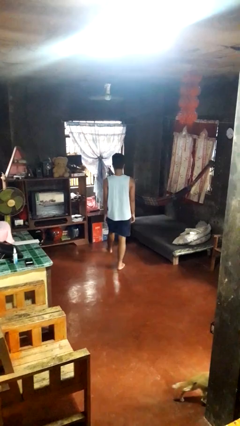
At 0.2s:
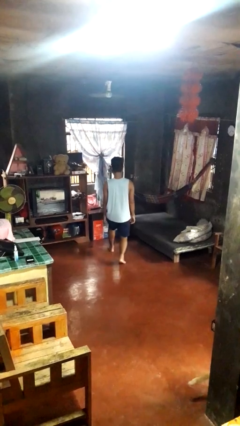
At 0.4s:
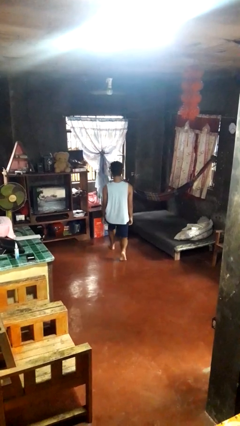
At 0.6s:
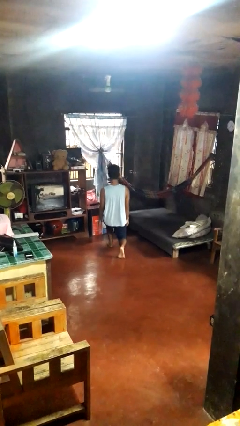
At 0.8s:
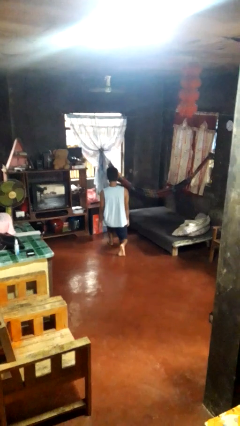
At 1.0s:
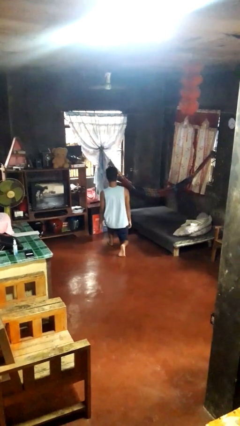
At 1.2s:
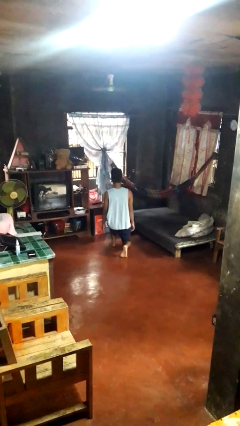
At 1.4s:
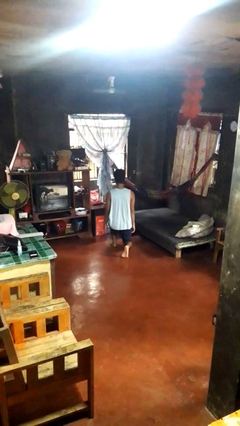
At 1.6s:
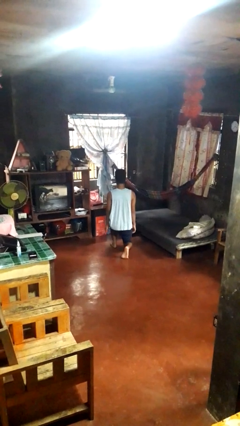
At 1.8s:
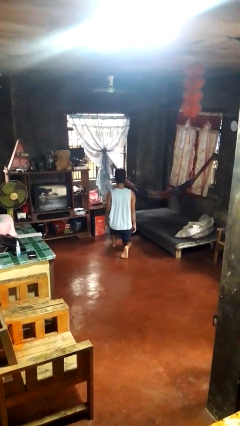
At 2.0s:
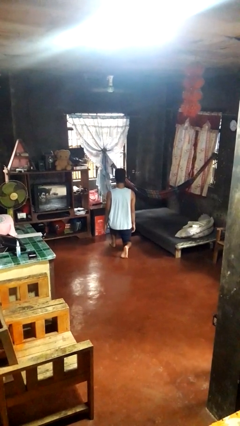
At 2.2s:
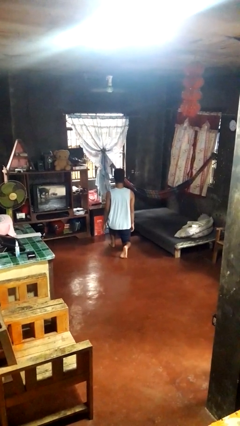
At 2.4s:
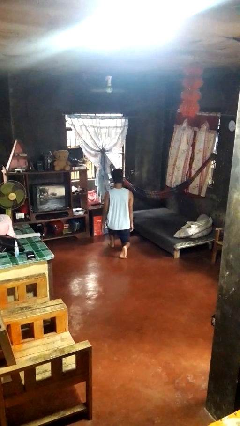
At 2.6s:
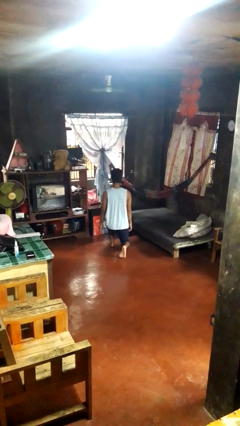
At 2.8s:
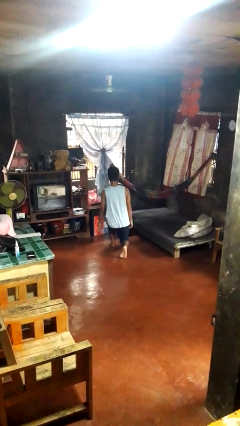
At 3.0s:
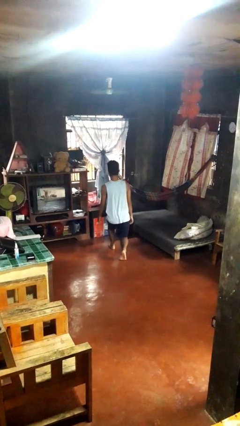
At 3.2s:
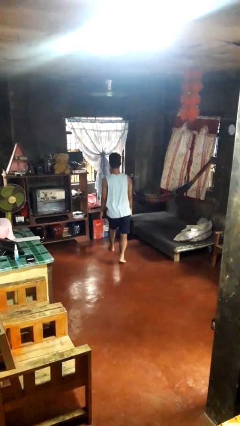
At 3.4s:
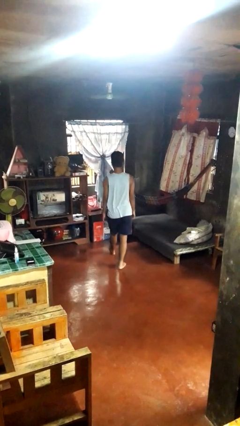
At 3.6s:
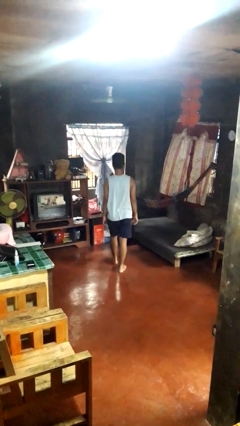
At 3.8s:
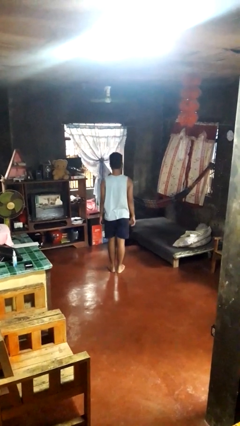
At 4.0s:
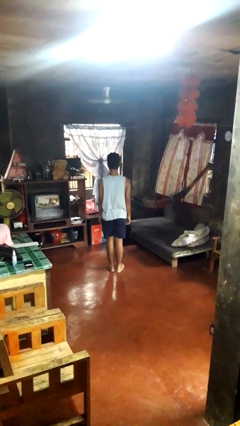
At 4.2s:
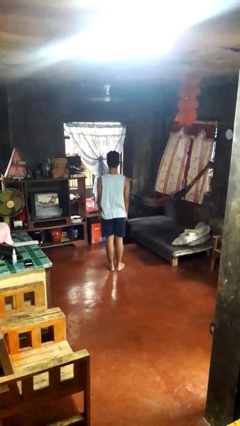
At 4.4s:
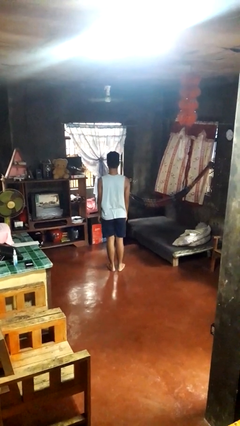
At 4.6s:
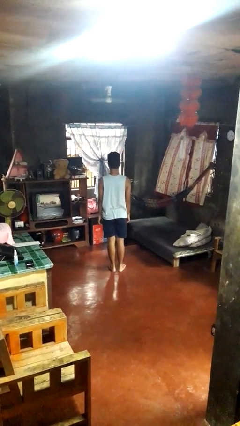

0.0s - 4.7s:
person exercises with lunges

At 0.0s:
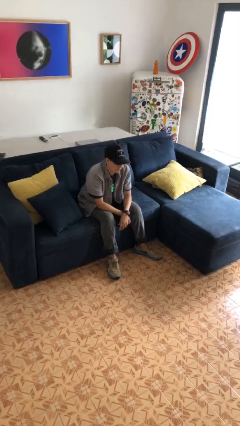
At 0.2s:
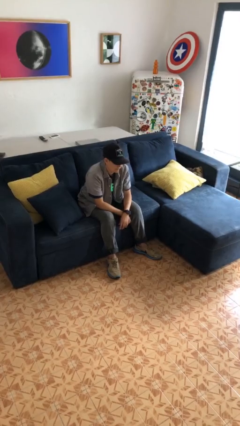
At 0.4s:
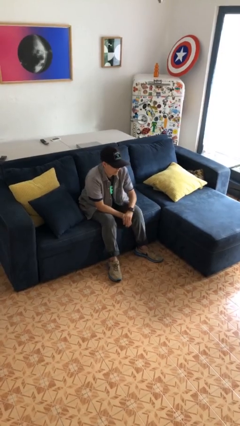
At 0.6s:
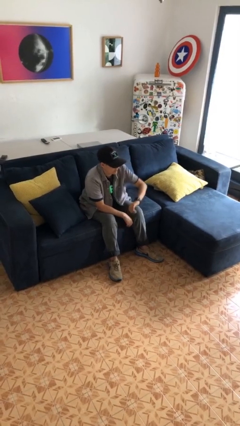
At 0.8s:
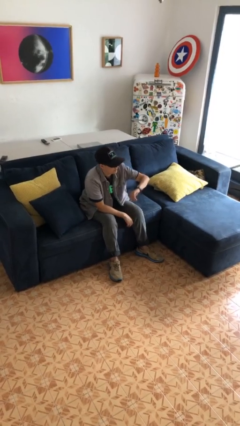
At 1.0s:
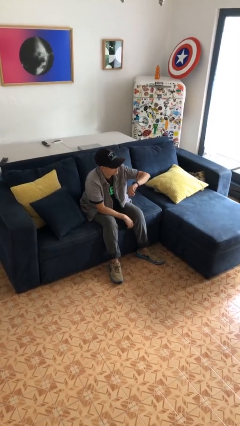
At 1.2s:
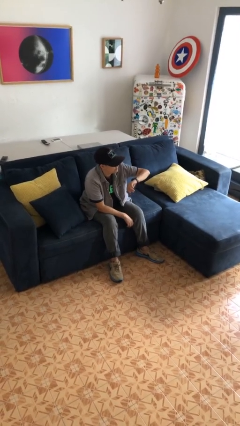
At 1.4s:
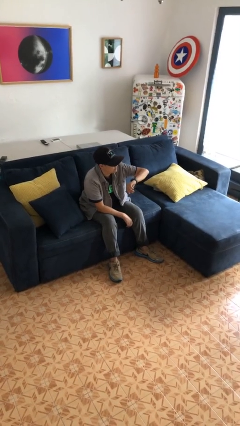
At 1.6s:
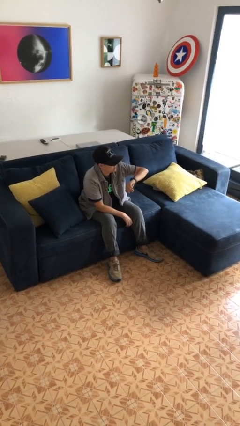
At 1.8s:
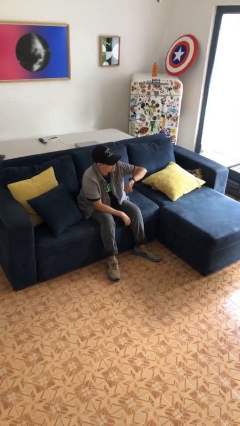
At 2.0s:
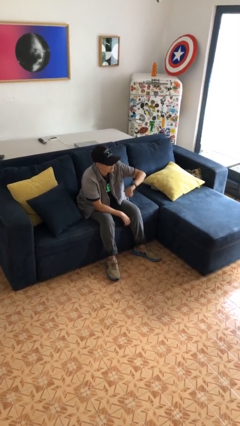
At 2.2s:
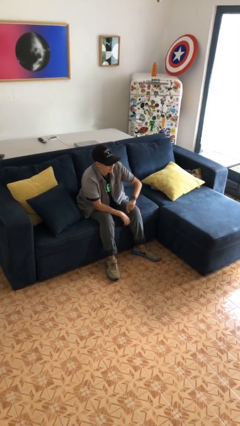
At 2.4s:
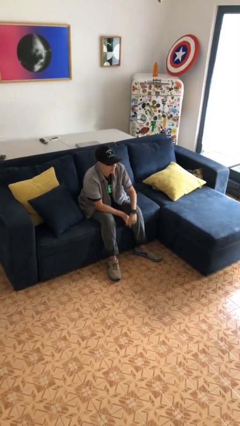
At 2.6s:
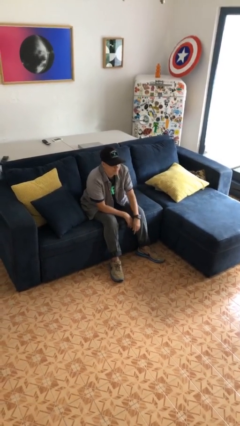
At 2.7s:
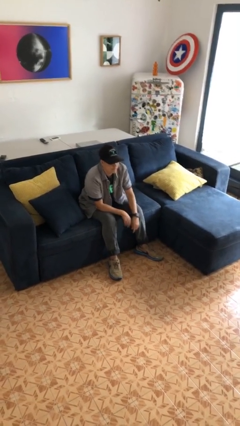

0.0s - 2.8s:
person looks at wristwatch

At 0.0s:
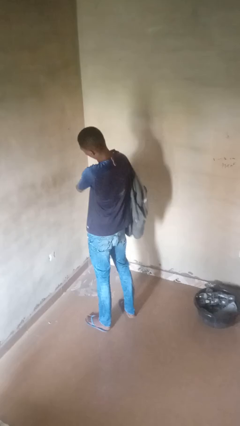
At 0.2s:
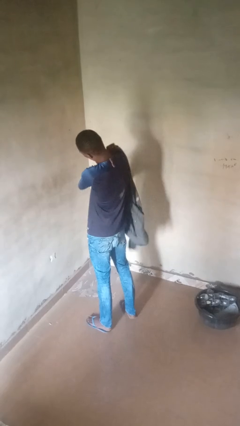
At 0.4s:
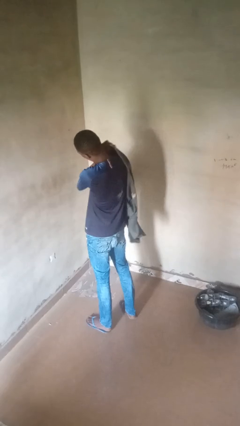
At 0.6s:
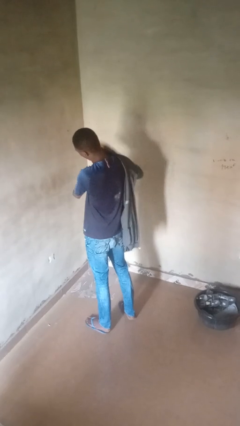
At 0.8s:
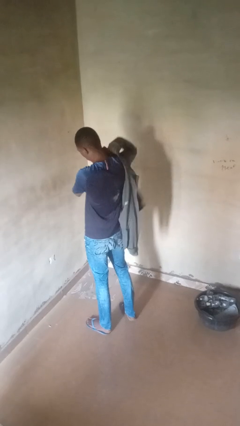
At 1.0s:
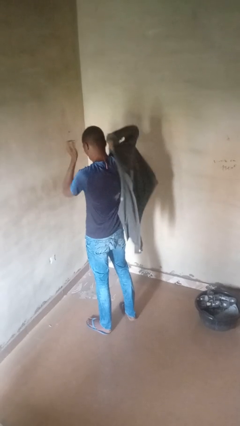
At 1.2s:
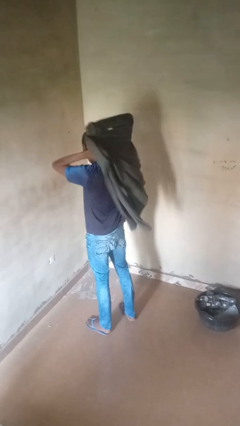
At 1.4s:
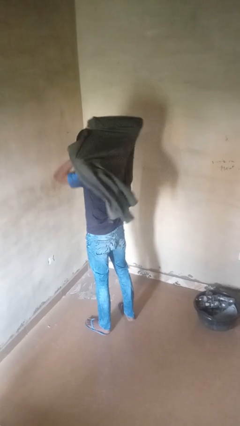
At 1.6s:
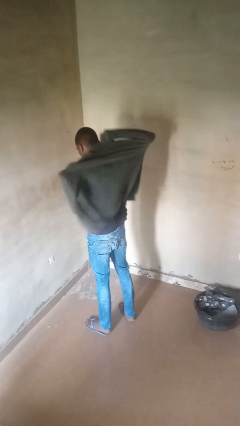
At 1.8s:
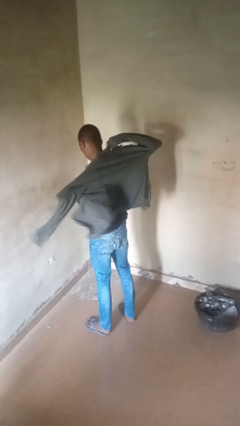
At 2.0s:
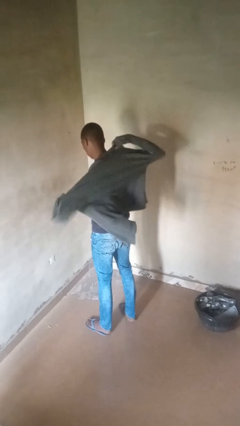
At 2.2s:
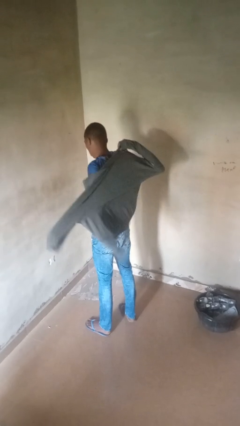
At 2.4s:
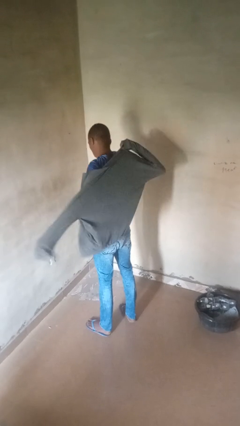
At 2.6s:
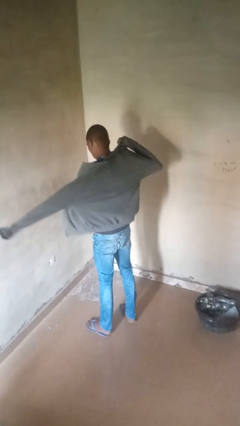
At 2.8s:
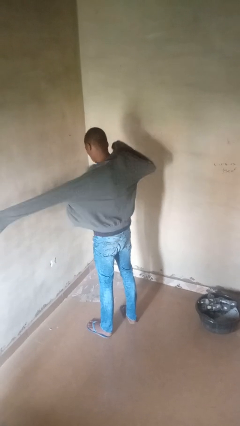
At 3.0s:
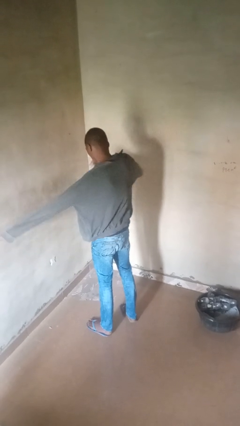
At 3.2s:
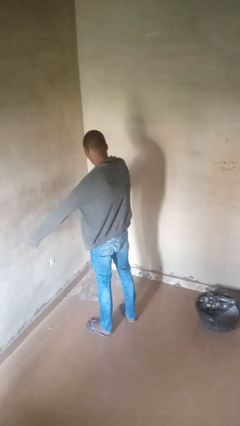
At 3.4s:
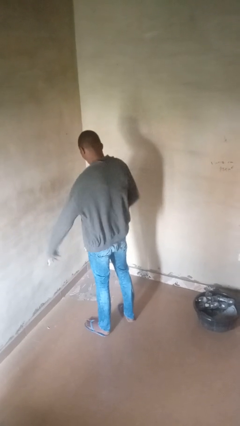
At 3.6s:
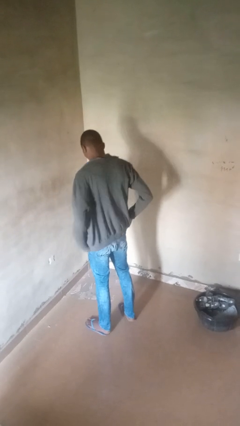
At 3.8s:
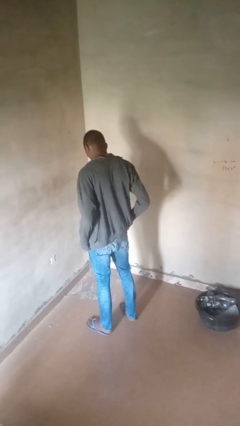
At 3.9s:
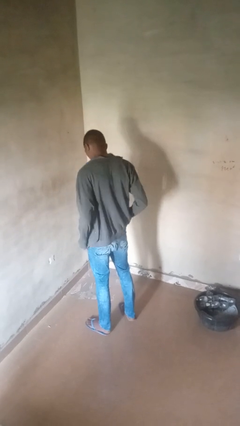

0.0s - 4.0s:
person puts on jacket

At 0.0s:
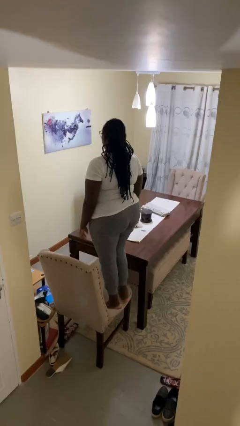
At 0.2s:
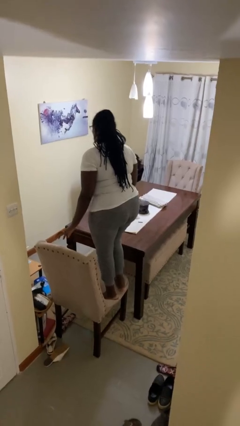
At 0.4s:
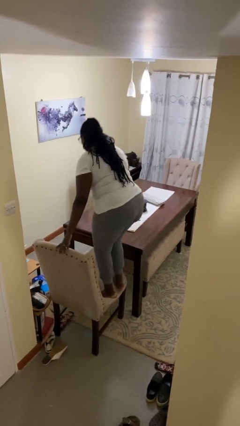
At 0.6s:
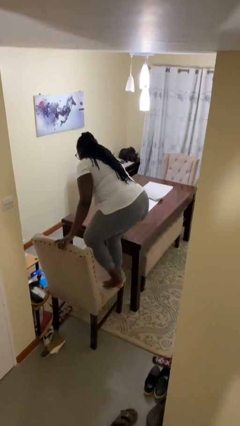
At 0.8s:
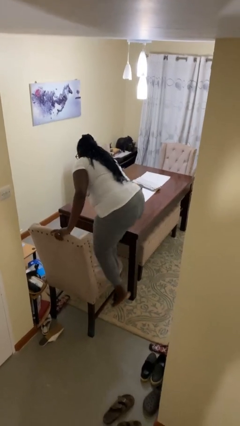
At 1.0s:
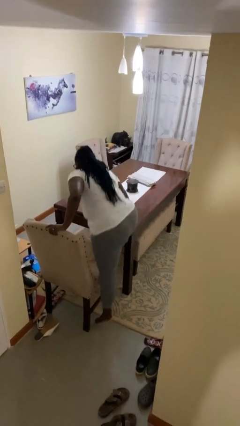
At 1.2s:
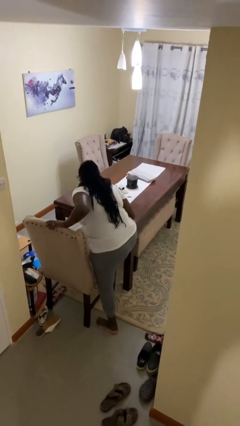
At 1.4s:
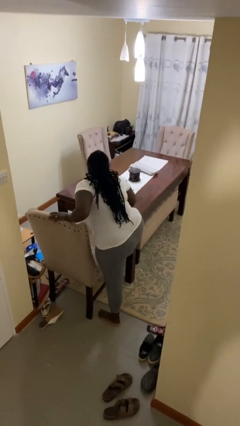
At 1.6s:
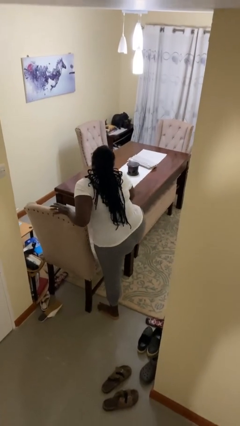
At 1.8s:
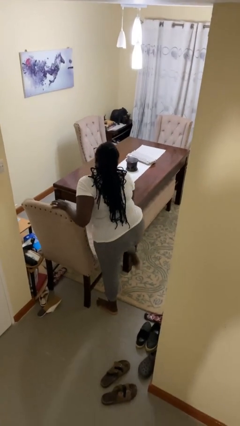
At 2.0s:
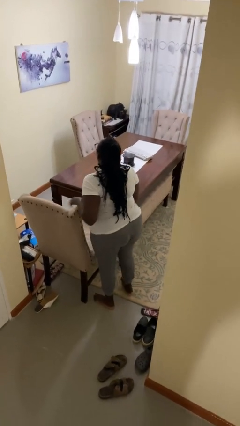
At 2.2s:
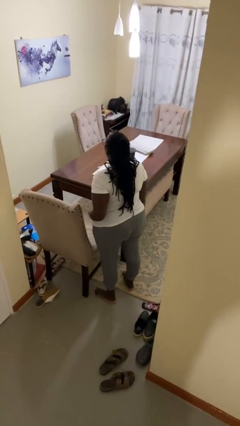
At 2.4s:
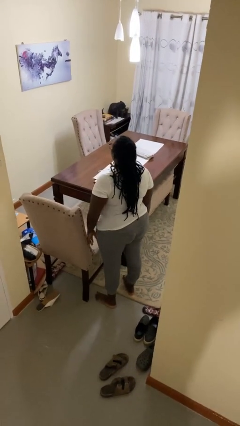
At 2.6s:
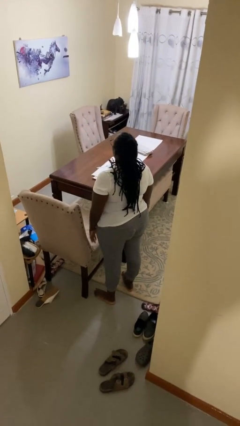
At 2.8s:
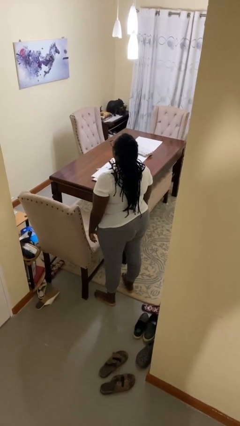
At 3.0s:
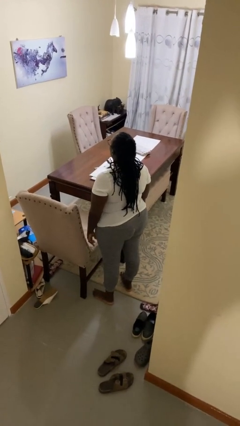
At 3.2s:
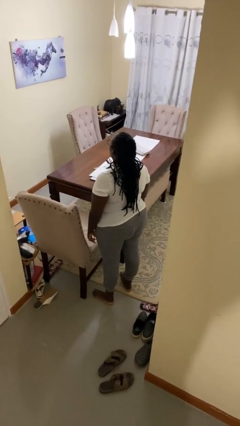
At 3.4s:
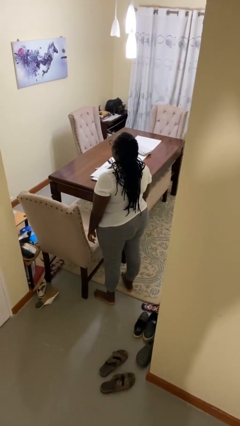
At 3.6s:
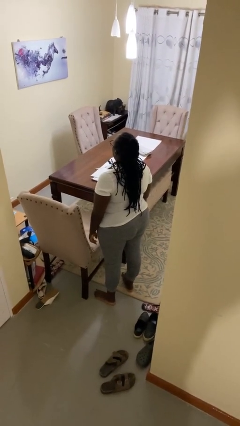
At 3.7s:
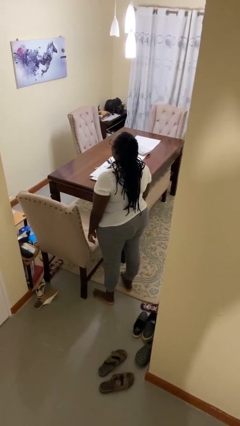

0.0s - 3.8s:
person climbs off chair

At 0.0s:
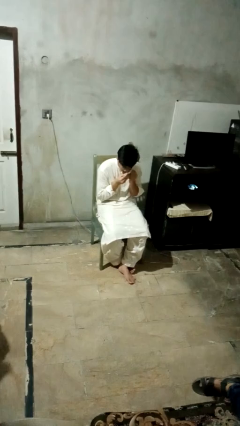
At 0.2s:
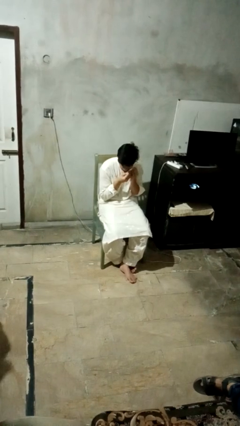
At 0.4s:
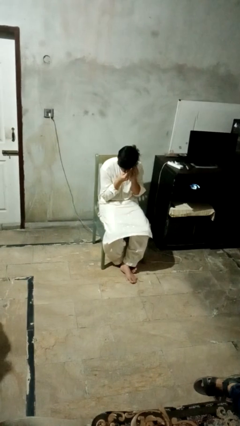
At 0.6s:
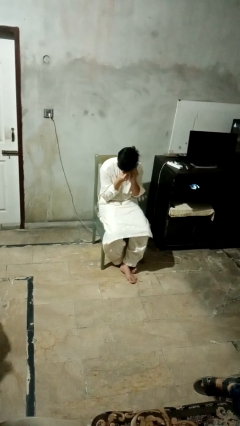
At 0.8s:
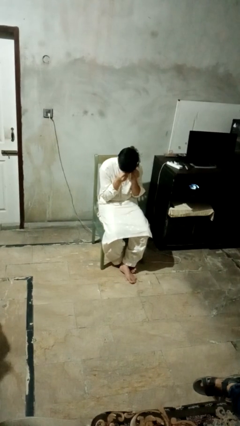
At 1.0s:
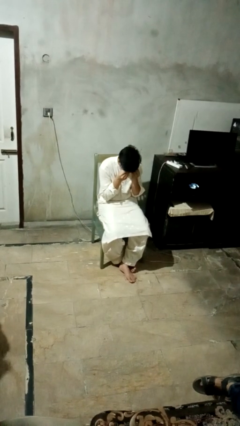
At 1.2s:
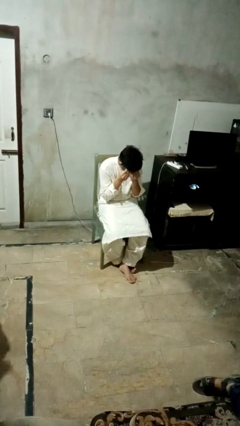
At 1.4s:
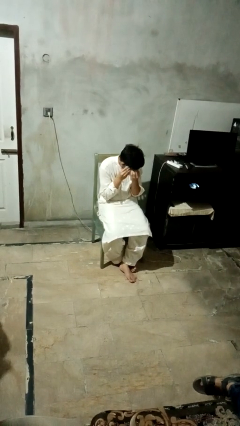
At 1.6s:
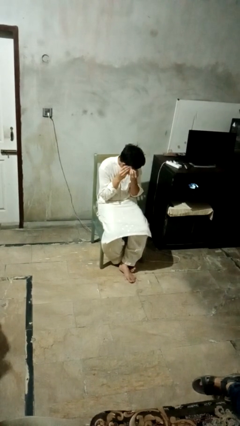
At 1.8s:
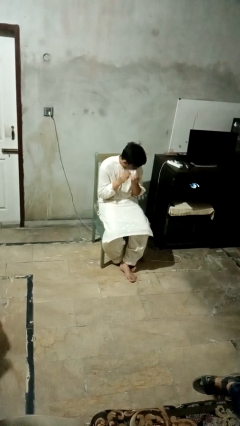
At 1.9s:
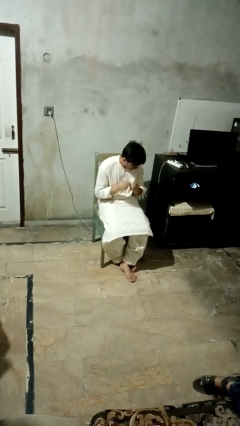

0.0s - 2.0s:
person wipes mouth with napkin

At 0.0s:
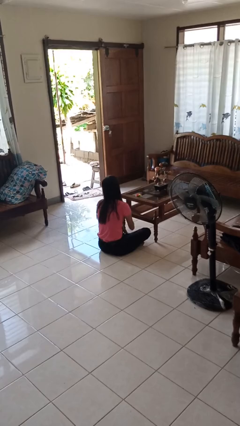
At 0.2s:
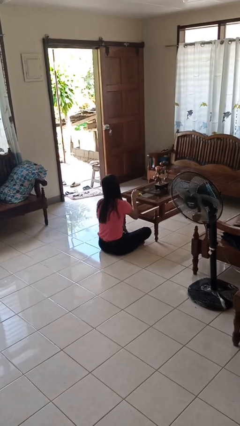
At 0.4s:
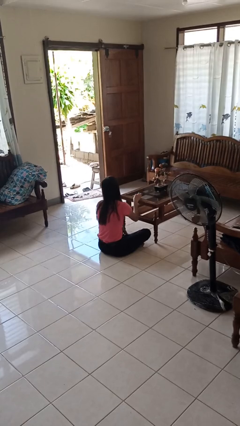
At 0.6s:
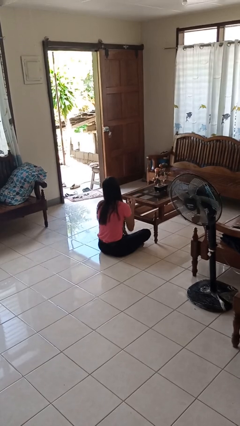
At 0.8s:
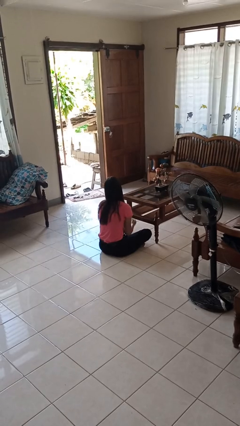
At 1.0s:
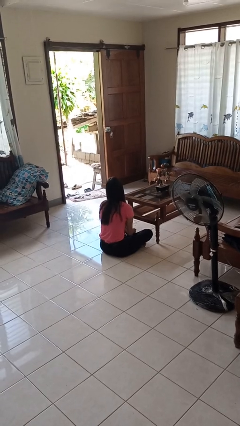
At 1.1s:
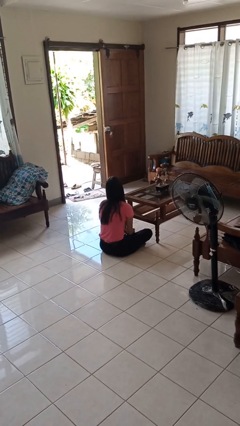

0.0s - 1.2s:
person picks up object from table
